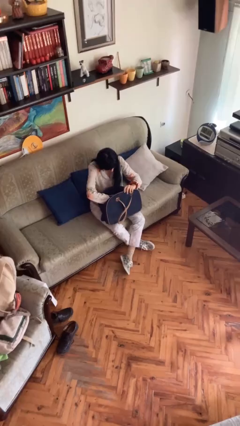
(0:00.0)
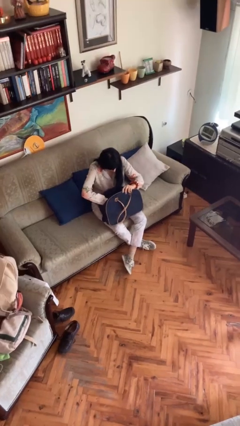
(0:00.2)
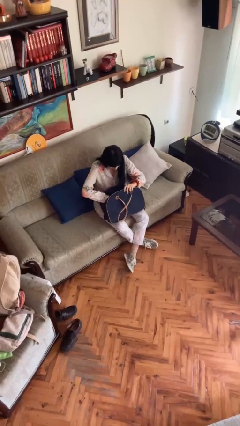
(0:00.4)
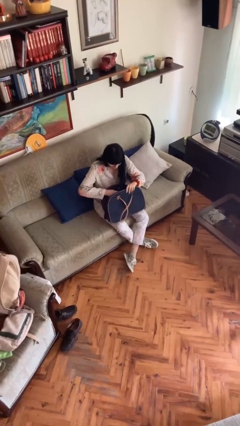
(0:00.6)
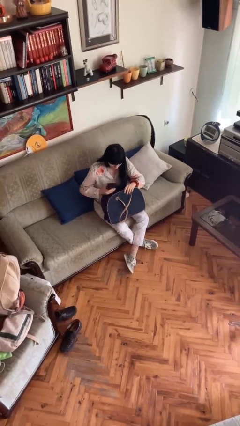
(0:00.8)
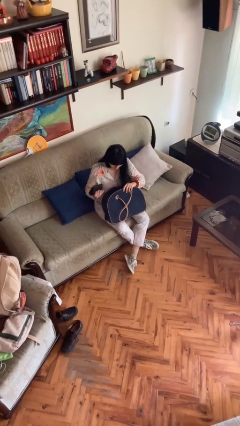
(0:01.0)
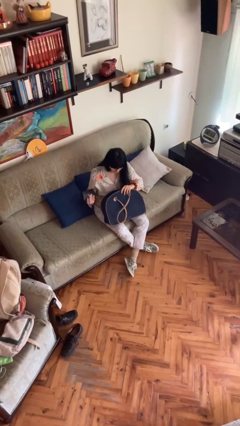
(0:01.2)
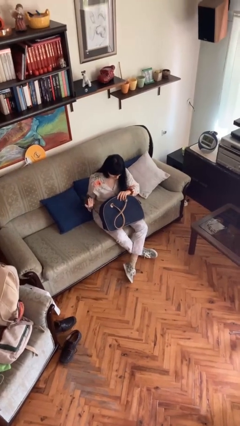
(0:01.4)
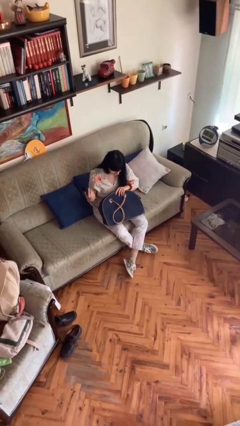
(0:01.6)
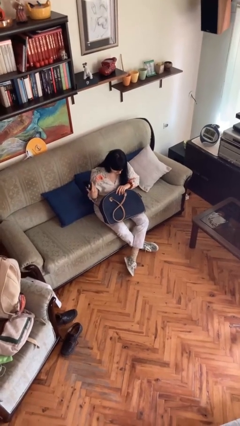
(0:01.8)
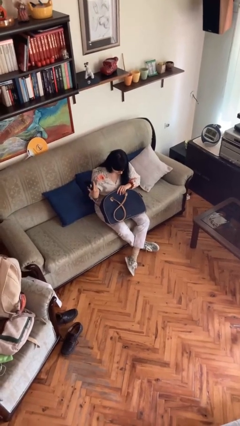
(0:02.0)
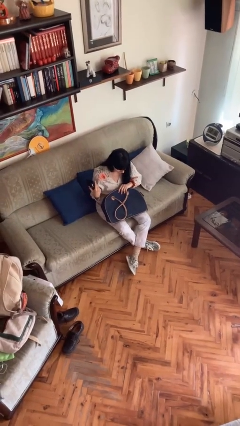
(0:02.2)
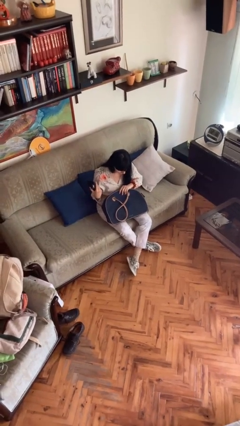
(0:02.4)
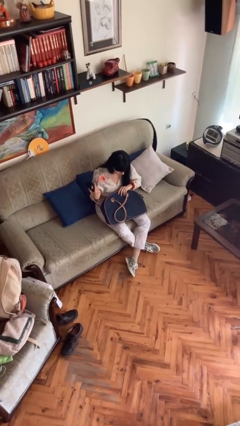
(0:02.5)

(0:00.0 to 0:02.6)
person takes object from purse

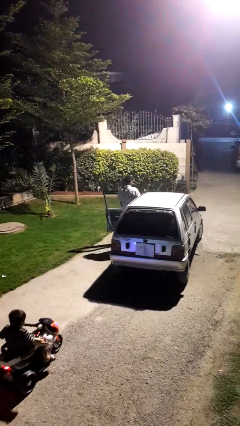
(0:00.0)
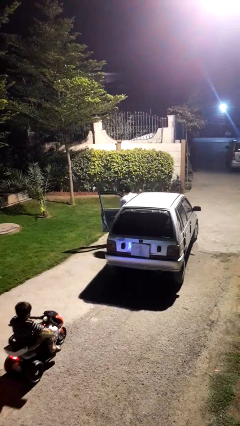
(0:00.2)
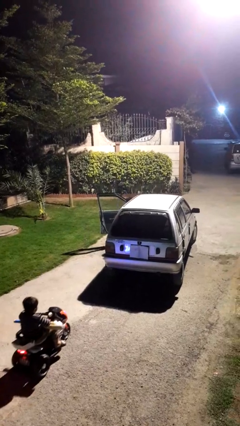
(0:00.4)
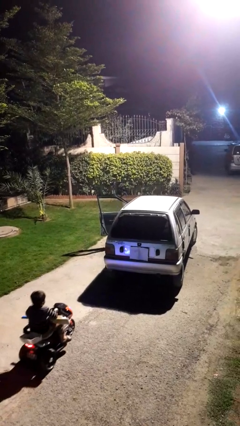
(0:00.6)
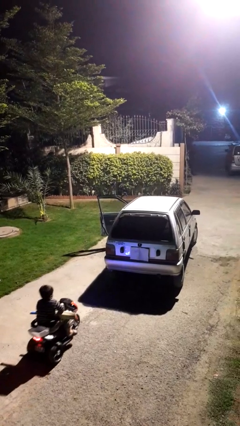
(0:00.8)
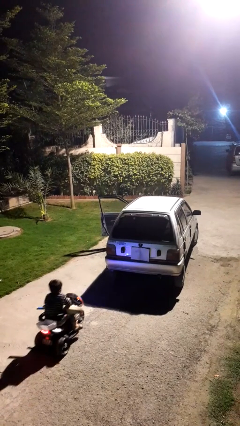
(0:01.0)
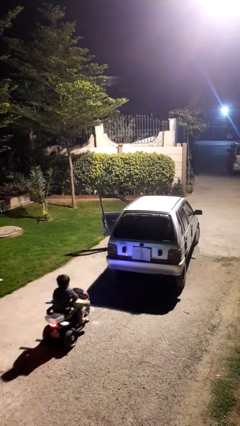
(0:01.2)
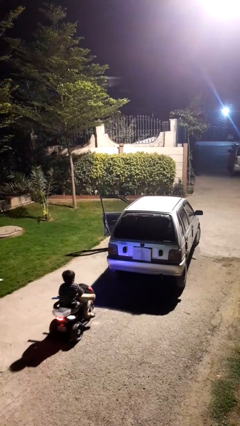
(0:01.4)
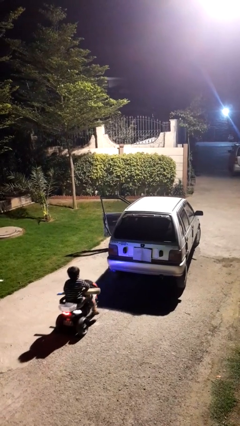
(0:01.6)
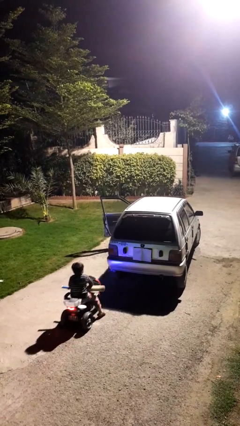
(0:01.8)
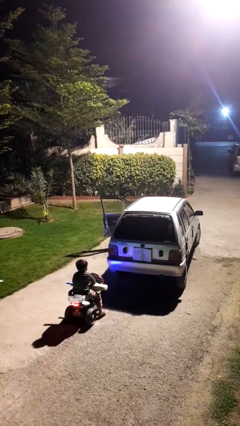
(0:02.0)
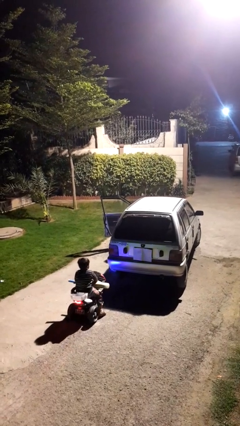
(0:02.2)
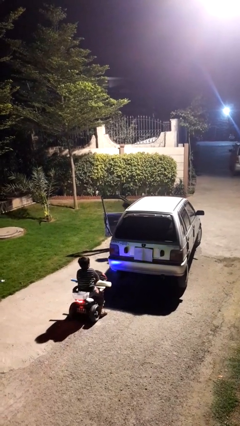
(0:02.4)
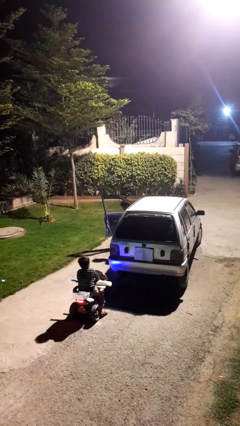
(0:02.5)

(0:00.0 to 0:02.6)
person enters car

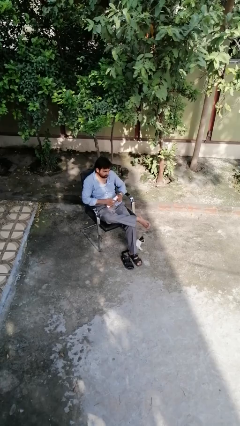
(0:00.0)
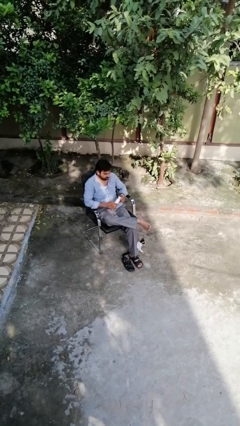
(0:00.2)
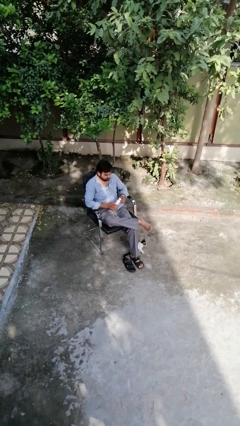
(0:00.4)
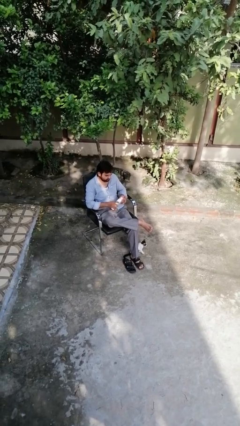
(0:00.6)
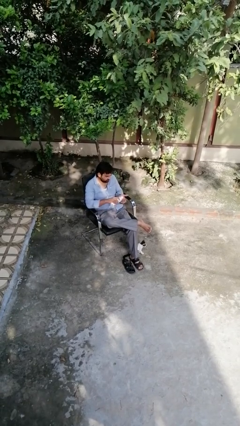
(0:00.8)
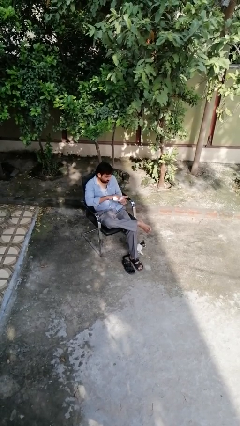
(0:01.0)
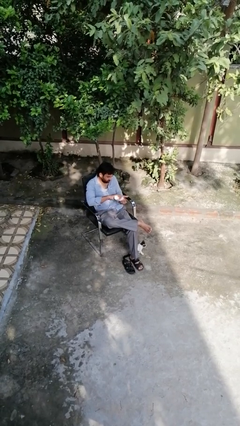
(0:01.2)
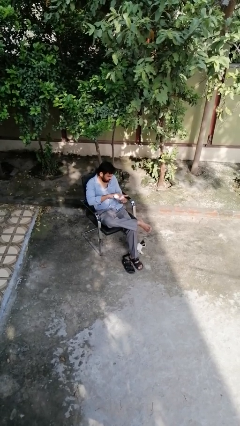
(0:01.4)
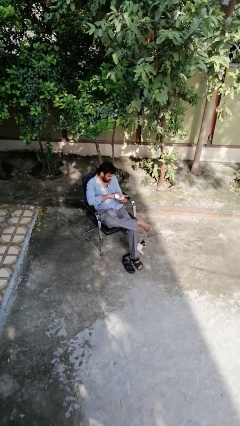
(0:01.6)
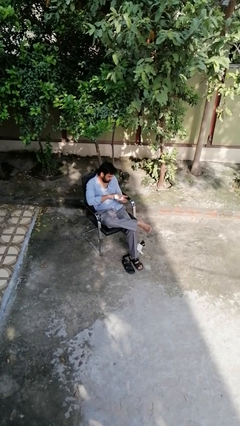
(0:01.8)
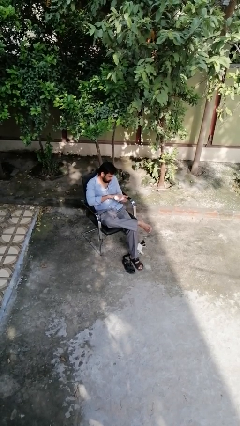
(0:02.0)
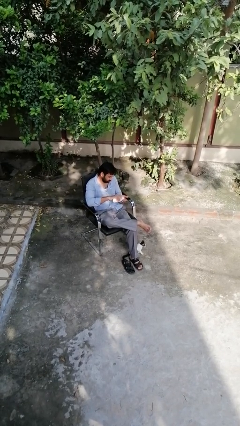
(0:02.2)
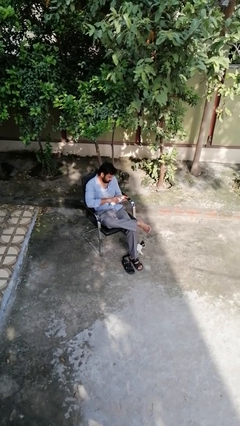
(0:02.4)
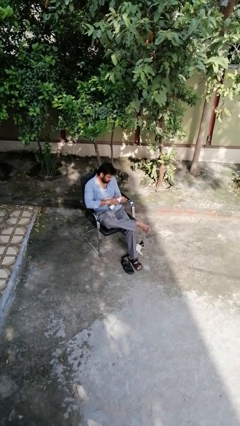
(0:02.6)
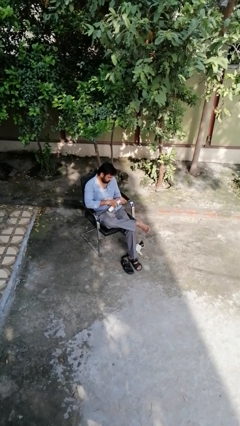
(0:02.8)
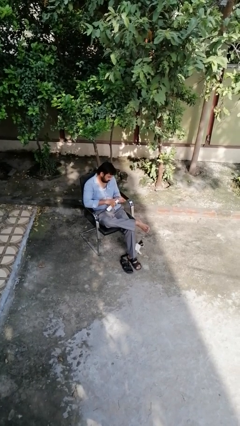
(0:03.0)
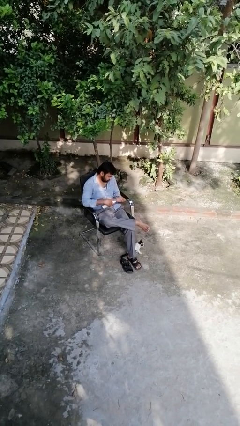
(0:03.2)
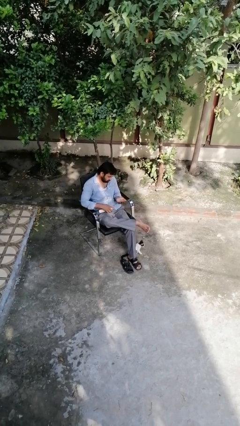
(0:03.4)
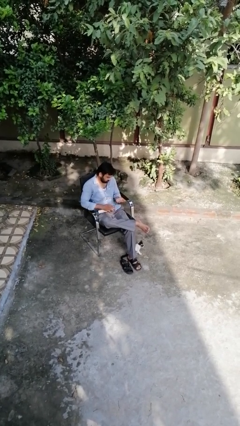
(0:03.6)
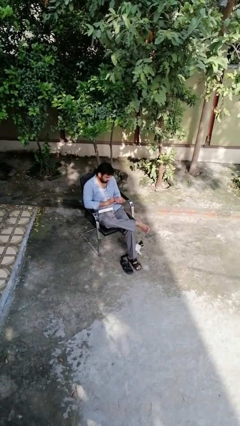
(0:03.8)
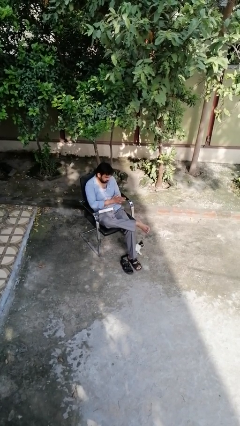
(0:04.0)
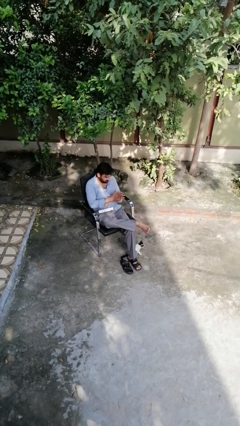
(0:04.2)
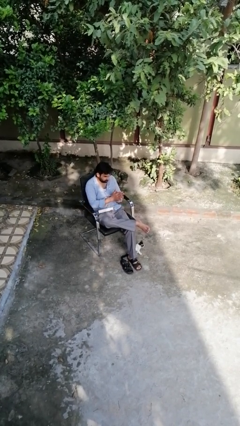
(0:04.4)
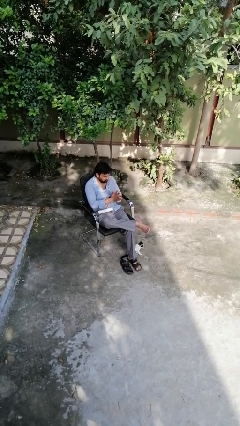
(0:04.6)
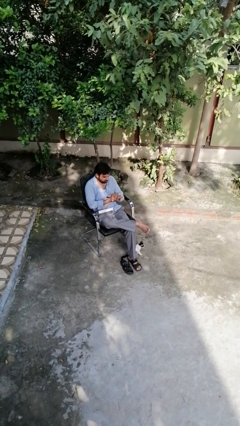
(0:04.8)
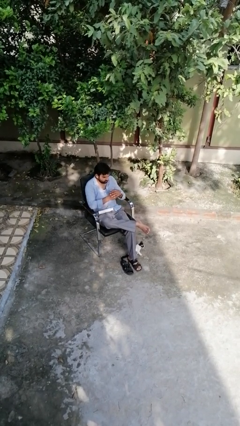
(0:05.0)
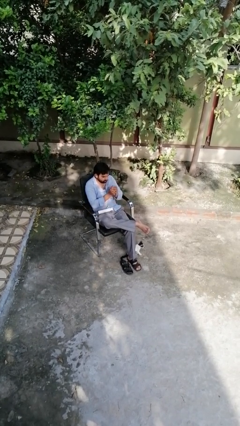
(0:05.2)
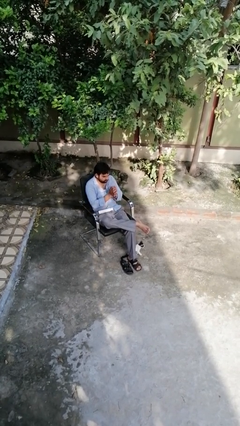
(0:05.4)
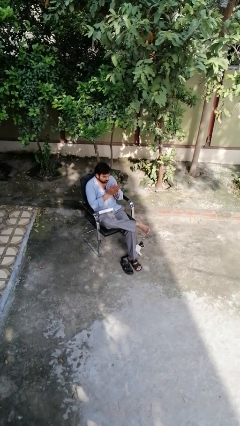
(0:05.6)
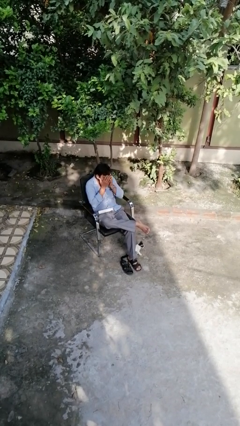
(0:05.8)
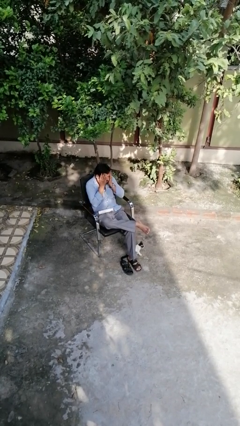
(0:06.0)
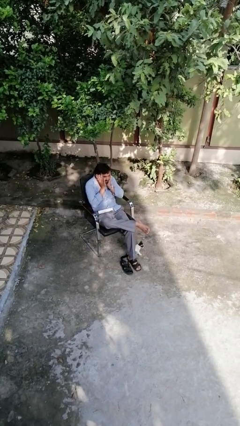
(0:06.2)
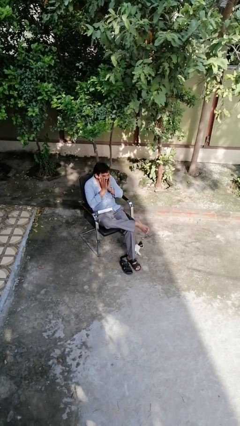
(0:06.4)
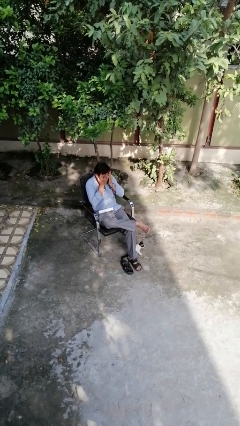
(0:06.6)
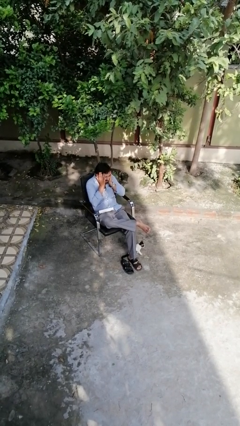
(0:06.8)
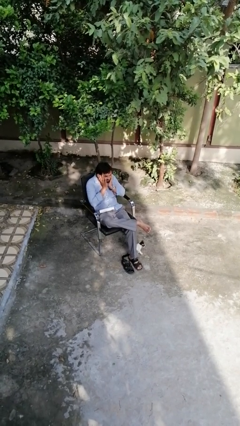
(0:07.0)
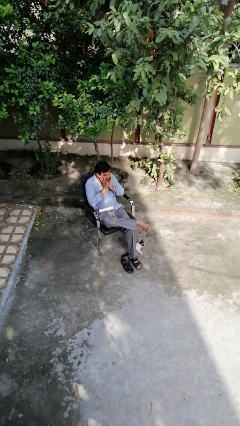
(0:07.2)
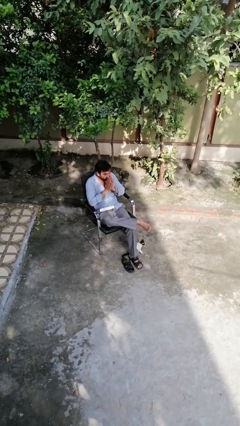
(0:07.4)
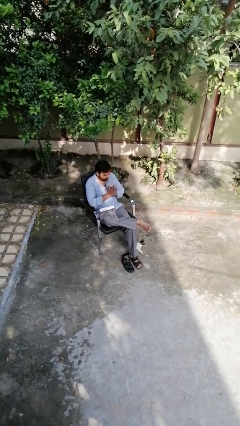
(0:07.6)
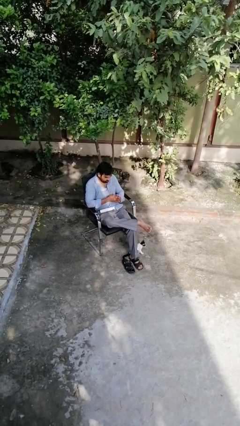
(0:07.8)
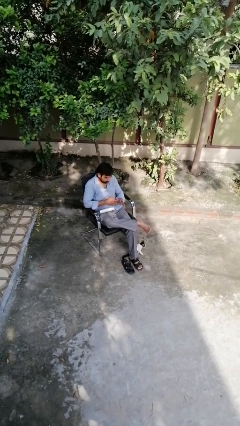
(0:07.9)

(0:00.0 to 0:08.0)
person applies facial moisturizer

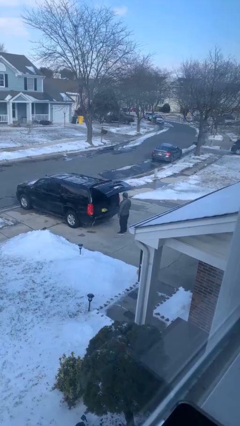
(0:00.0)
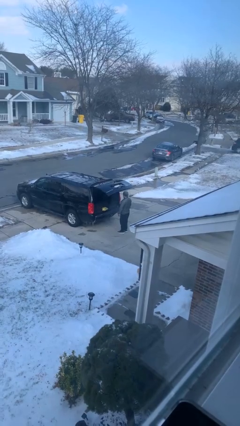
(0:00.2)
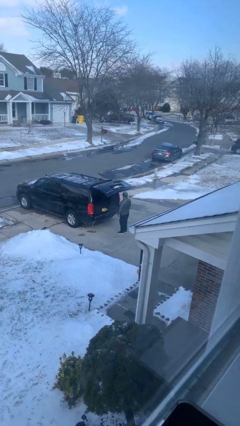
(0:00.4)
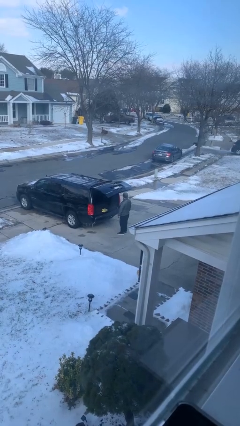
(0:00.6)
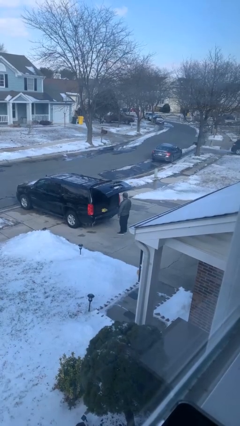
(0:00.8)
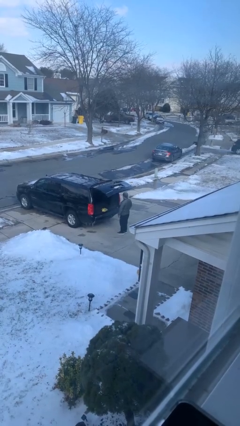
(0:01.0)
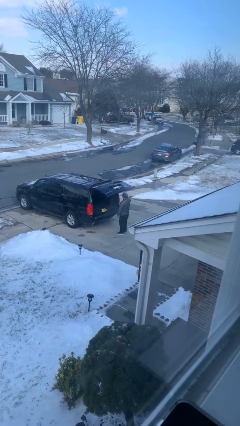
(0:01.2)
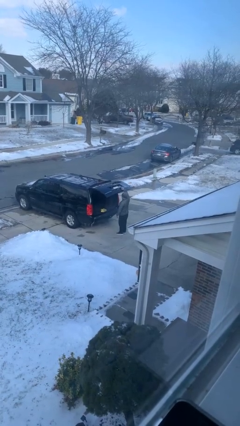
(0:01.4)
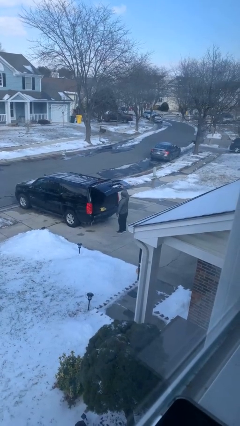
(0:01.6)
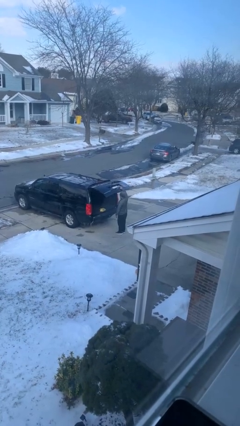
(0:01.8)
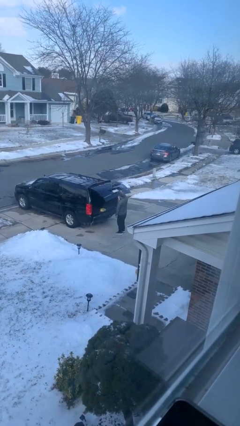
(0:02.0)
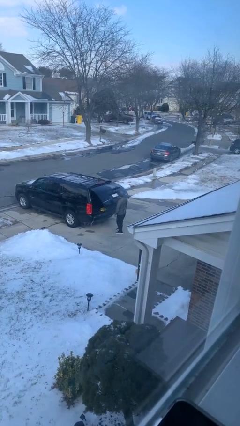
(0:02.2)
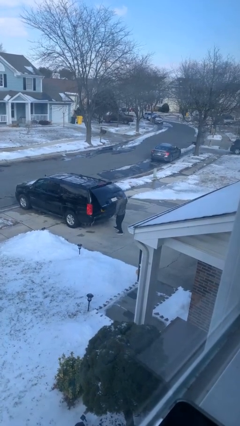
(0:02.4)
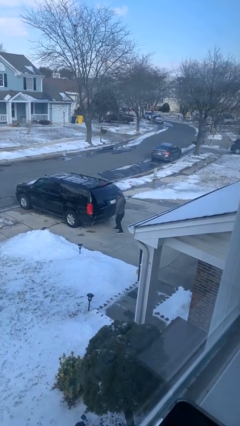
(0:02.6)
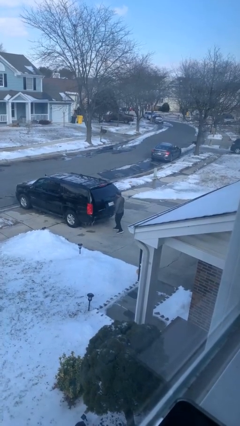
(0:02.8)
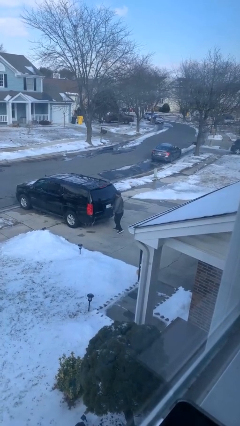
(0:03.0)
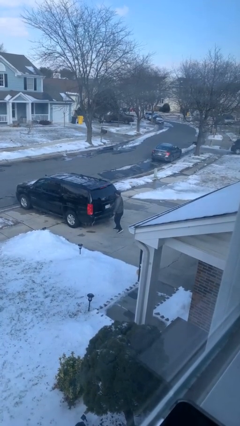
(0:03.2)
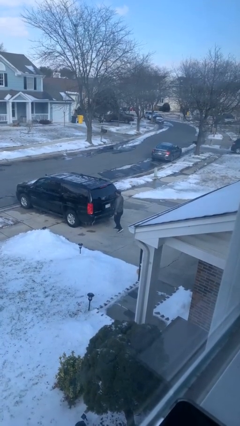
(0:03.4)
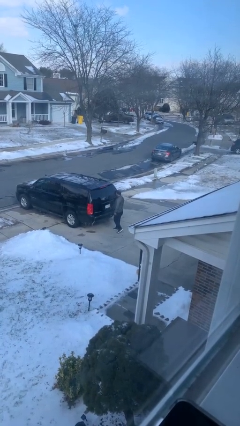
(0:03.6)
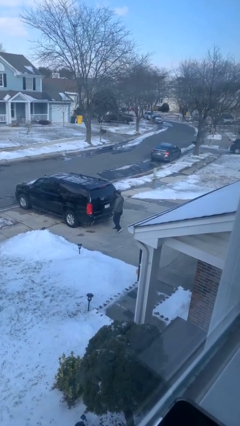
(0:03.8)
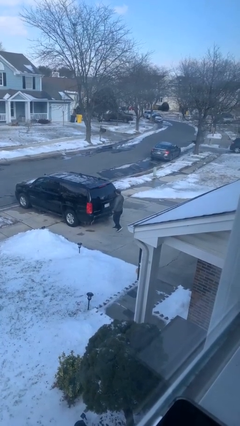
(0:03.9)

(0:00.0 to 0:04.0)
person closes car trunk

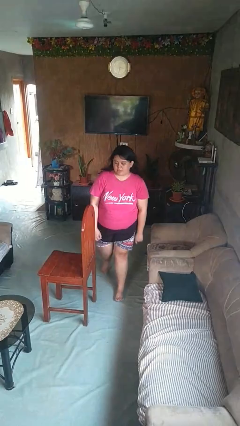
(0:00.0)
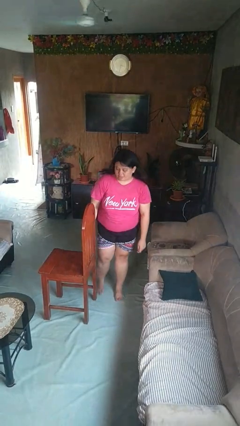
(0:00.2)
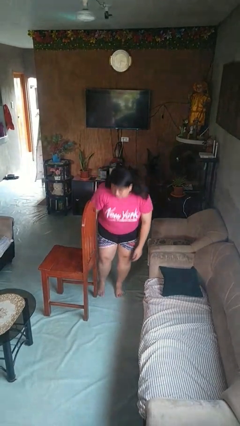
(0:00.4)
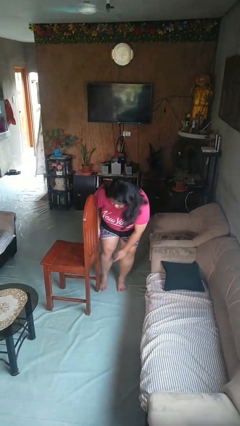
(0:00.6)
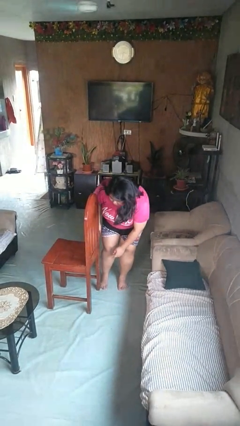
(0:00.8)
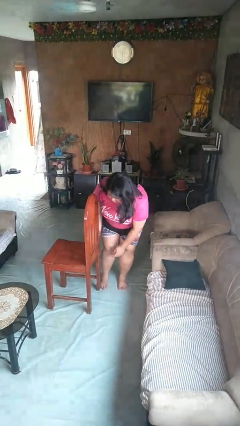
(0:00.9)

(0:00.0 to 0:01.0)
person stubs toe
